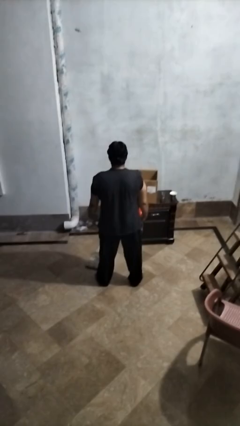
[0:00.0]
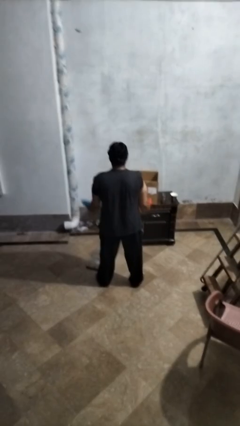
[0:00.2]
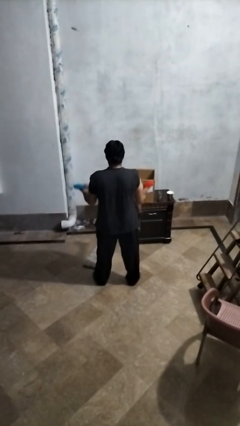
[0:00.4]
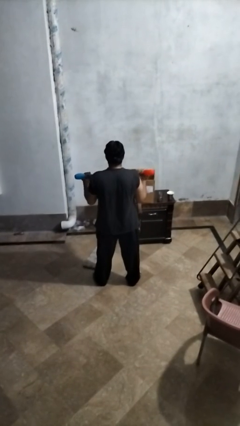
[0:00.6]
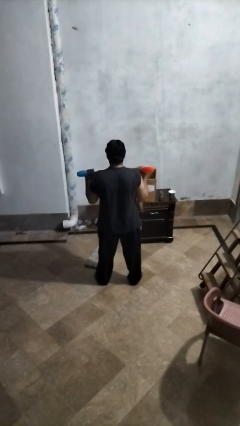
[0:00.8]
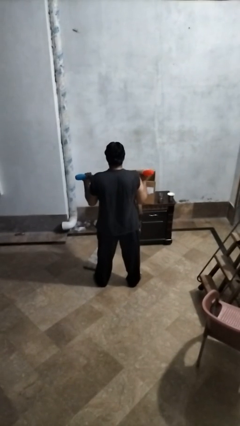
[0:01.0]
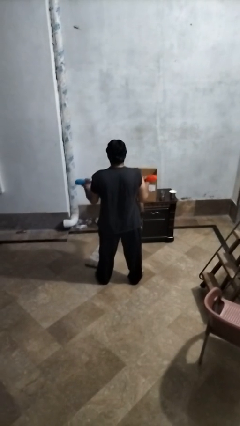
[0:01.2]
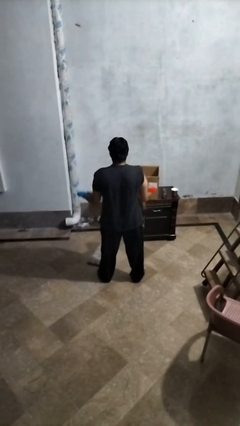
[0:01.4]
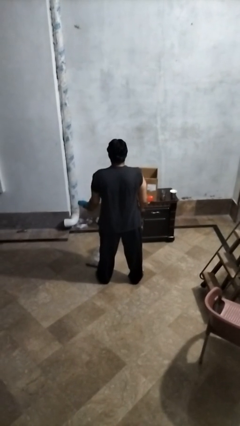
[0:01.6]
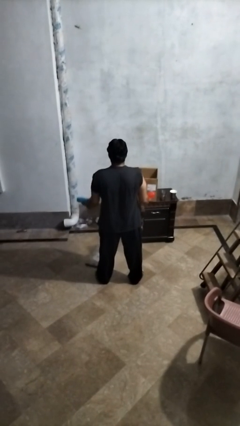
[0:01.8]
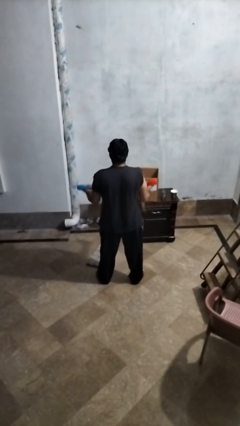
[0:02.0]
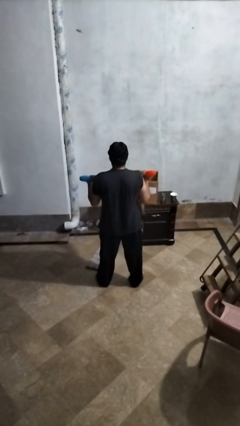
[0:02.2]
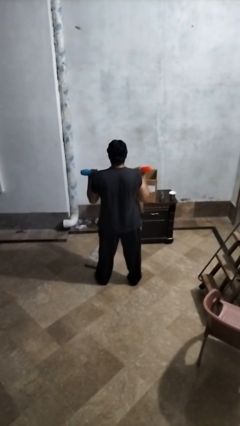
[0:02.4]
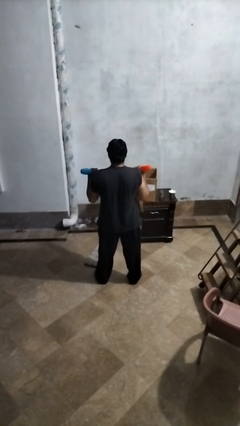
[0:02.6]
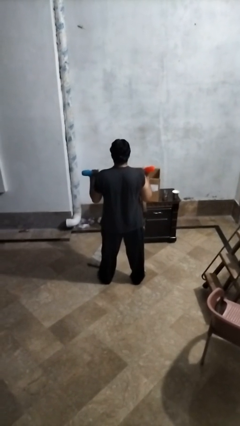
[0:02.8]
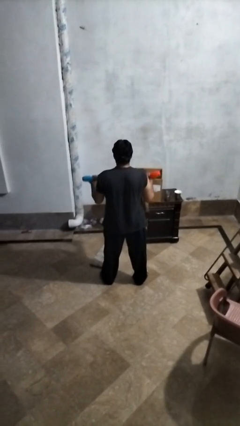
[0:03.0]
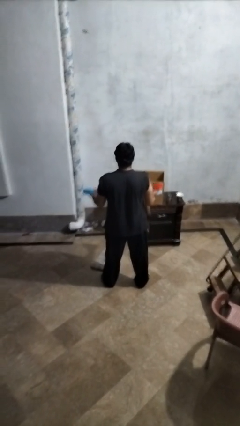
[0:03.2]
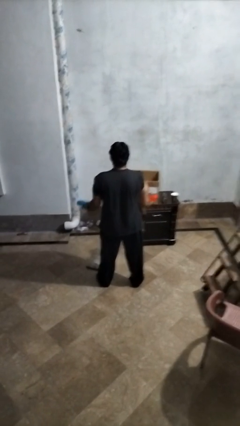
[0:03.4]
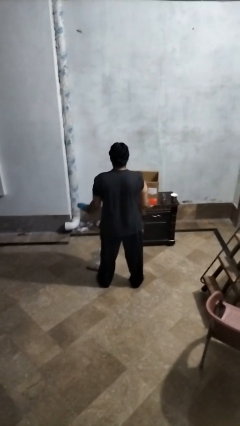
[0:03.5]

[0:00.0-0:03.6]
person lifts dumbbells

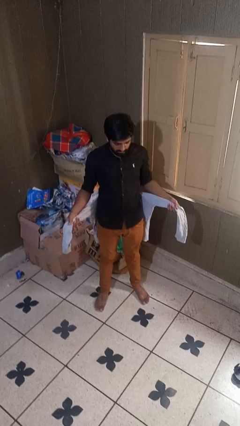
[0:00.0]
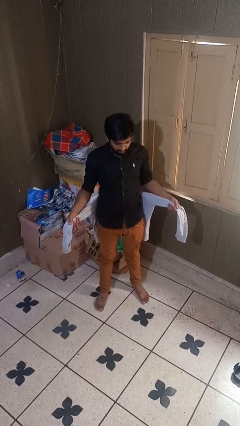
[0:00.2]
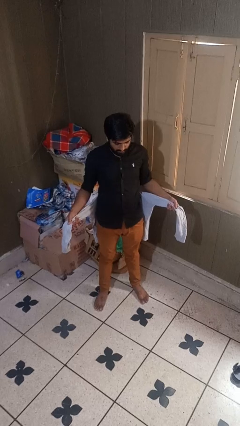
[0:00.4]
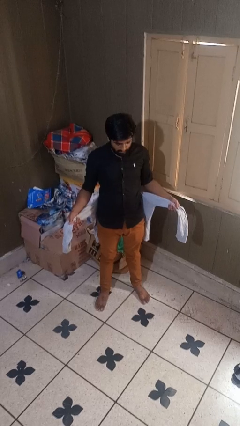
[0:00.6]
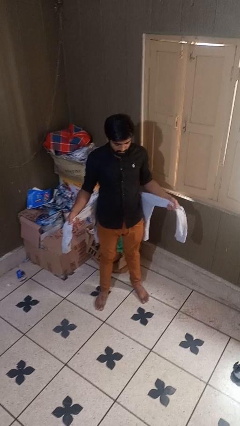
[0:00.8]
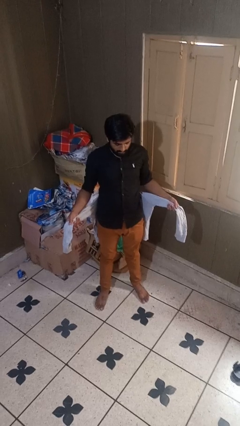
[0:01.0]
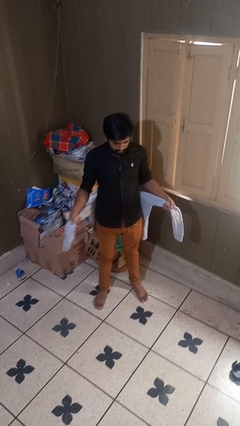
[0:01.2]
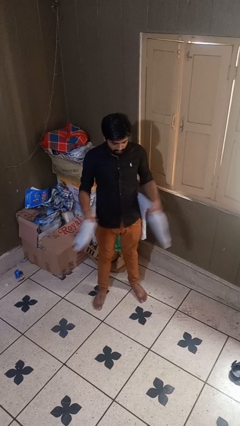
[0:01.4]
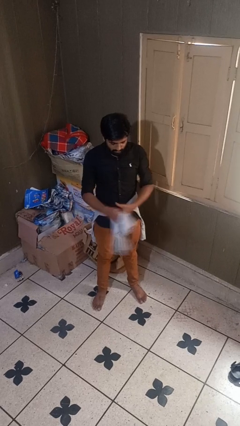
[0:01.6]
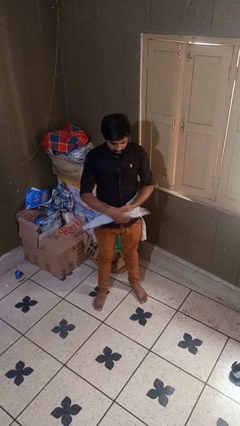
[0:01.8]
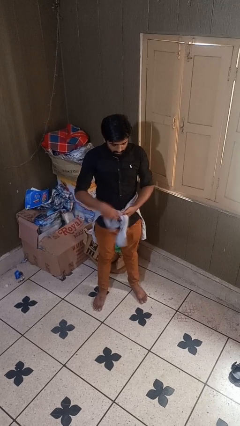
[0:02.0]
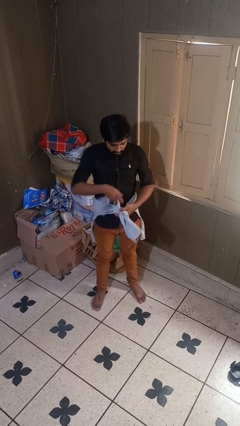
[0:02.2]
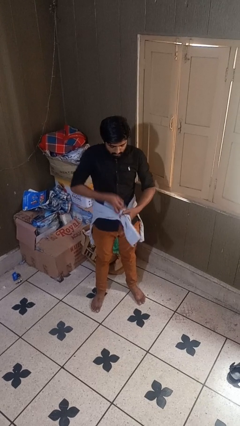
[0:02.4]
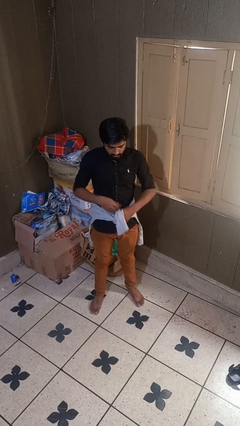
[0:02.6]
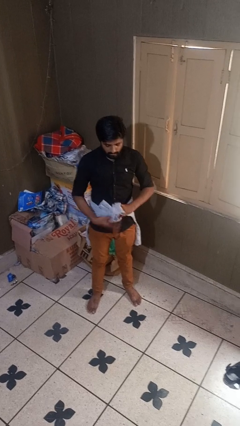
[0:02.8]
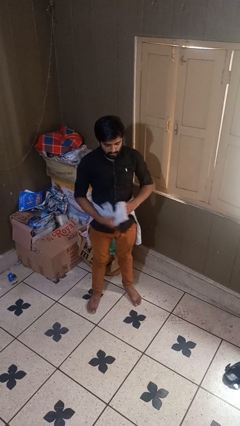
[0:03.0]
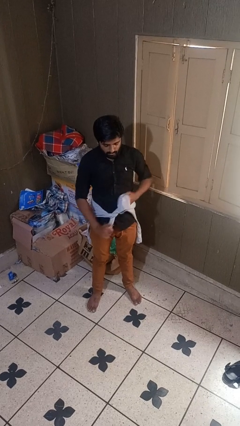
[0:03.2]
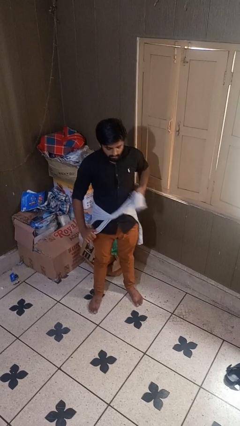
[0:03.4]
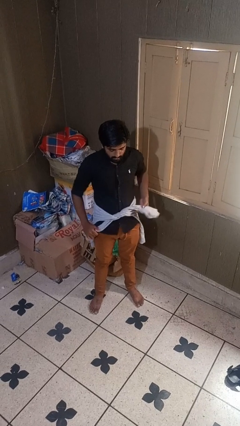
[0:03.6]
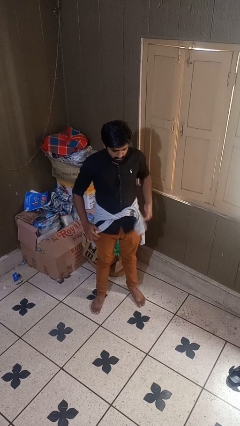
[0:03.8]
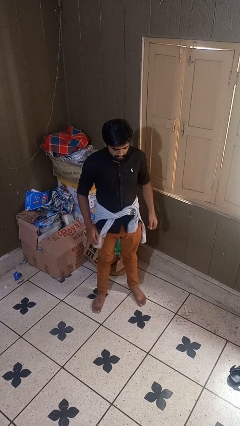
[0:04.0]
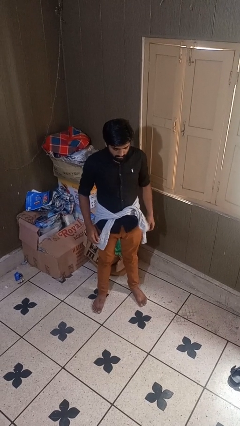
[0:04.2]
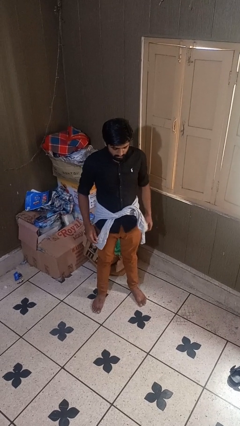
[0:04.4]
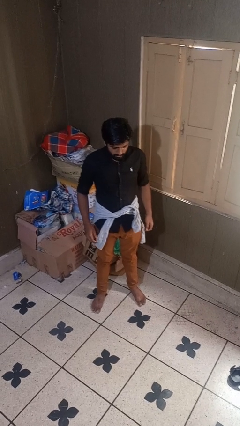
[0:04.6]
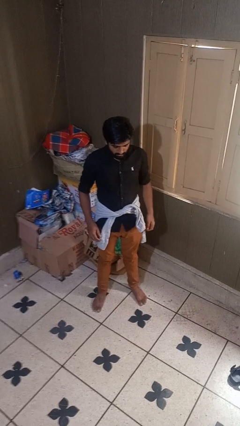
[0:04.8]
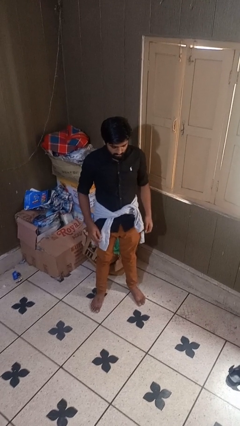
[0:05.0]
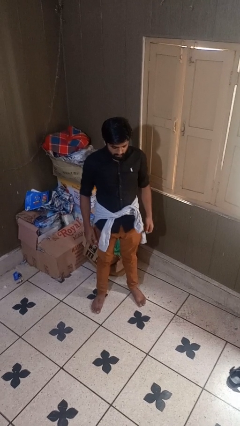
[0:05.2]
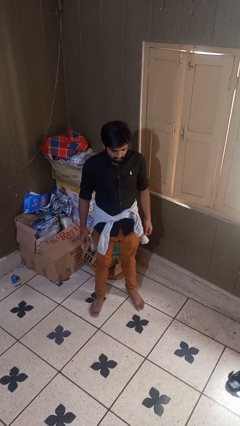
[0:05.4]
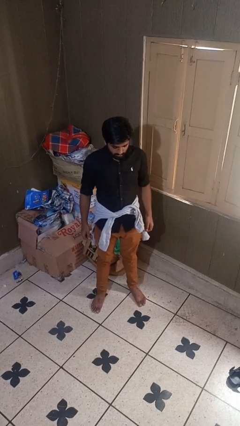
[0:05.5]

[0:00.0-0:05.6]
person ties jacket around waist

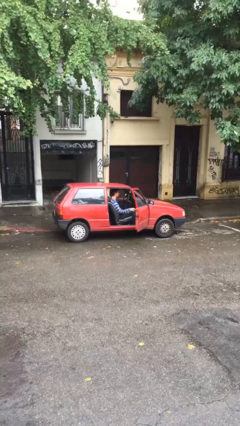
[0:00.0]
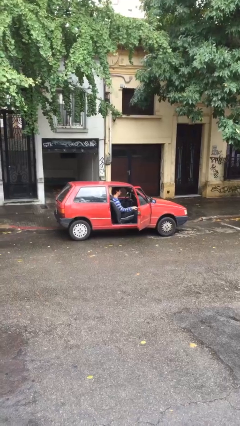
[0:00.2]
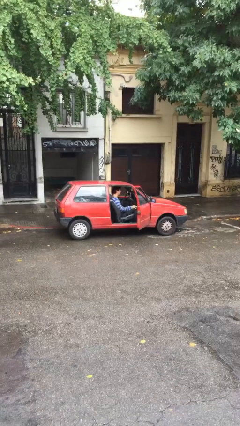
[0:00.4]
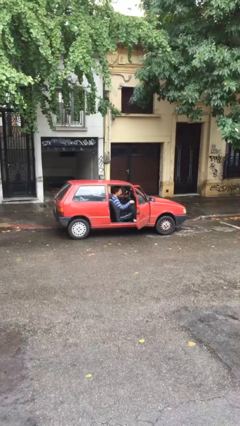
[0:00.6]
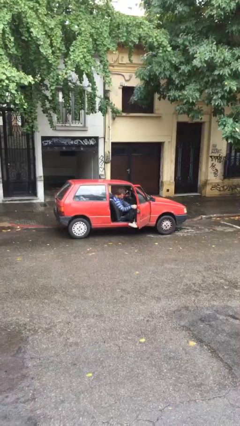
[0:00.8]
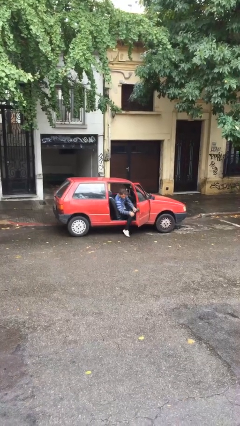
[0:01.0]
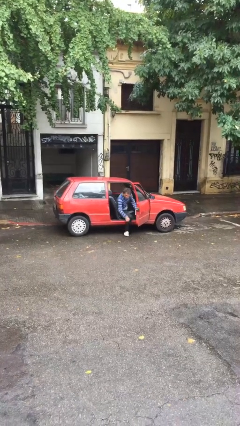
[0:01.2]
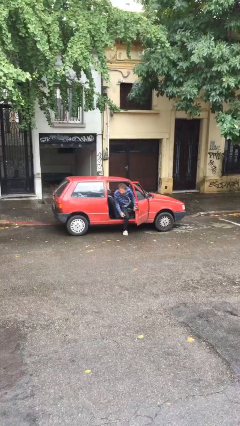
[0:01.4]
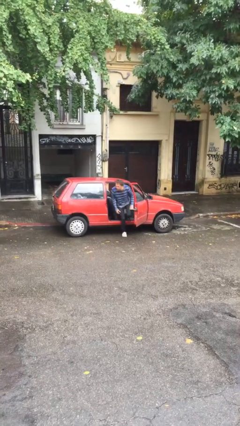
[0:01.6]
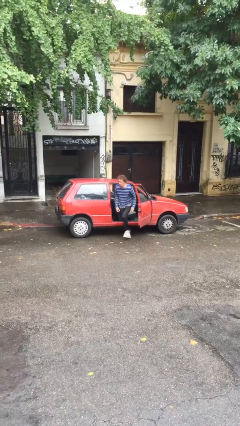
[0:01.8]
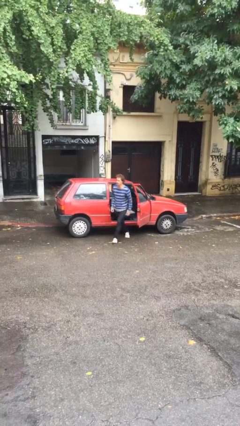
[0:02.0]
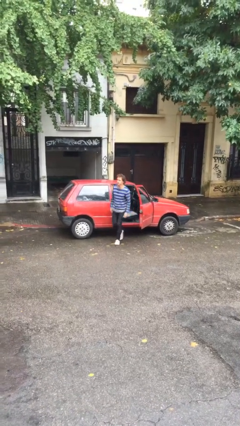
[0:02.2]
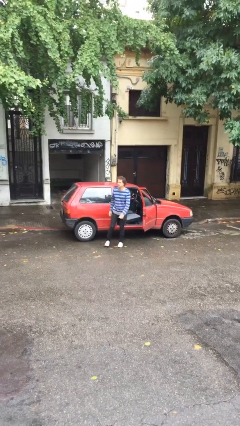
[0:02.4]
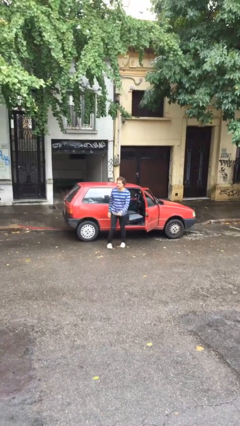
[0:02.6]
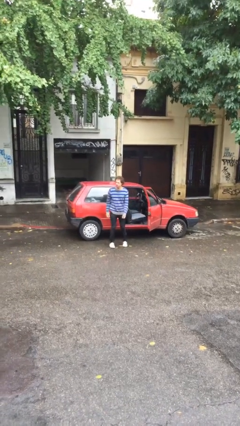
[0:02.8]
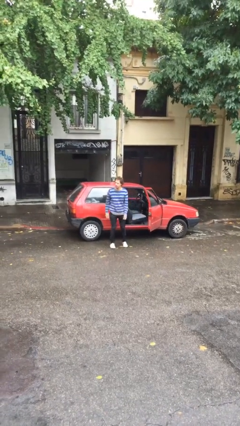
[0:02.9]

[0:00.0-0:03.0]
person exits car

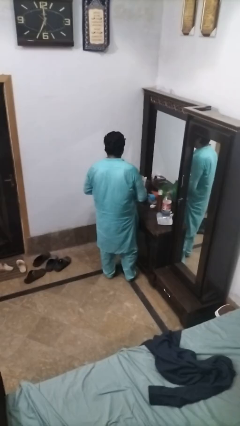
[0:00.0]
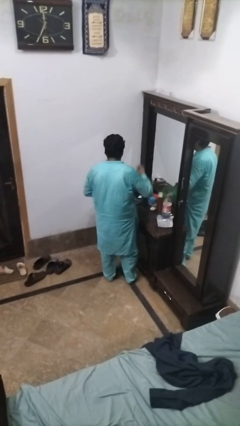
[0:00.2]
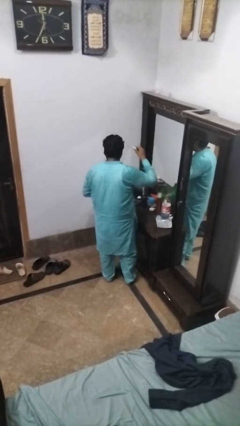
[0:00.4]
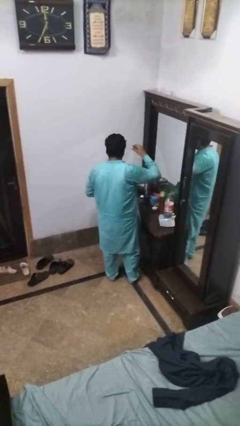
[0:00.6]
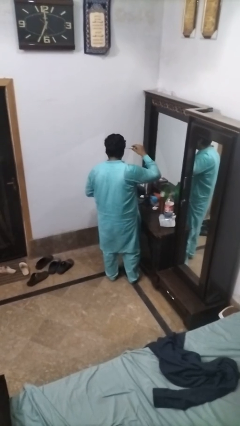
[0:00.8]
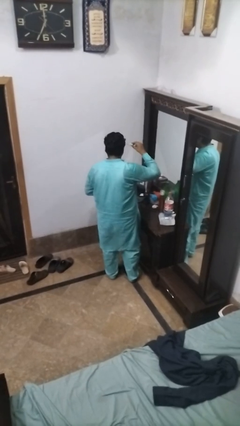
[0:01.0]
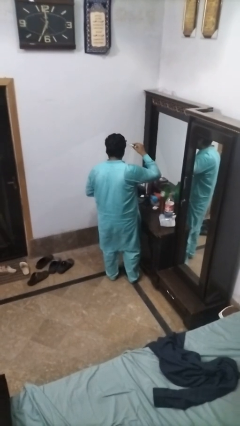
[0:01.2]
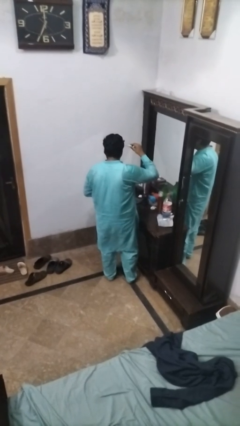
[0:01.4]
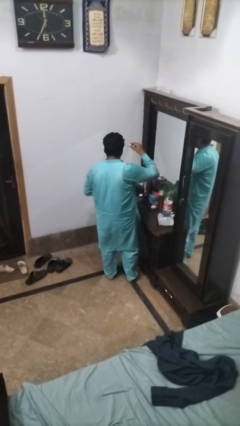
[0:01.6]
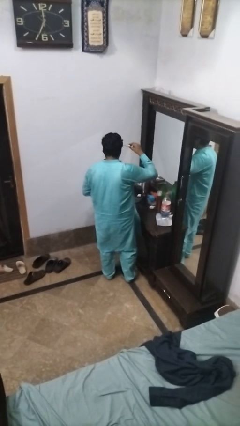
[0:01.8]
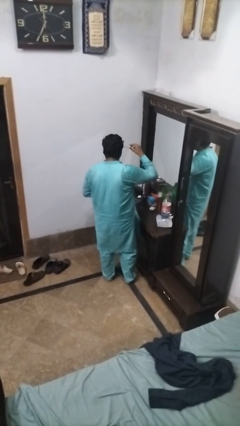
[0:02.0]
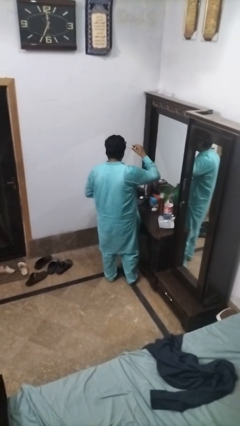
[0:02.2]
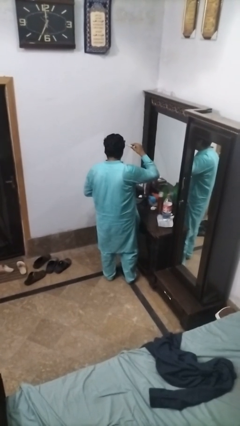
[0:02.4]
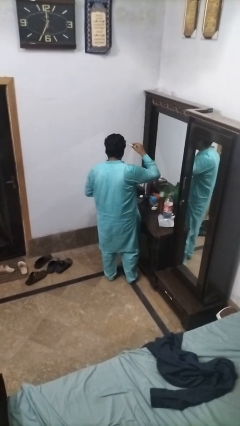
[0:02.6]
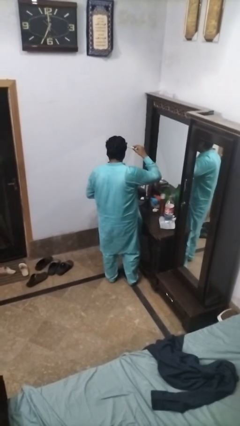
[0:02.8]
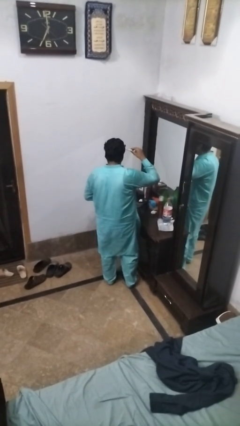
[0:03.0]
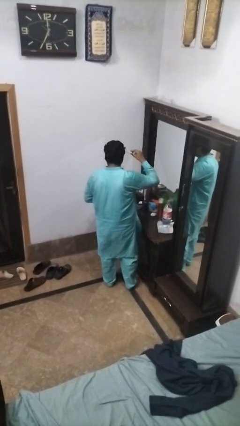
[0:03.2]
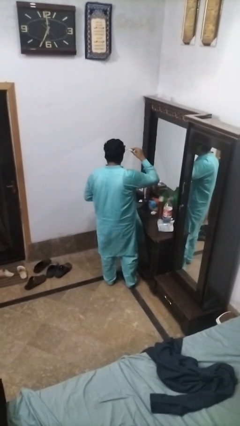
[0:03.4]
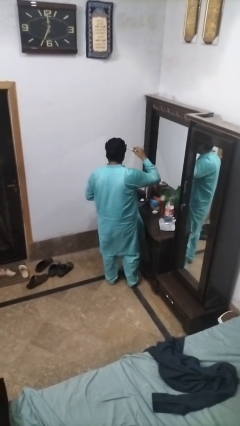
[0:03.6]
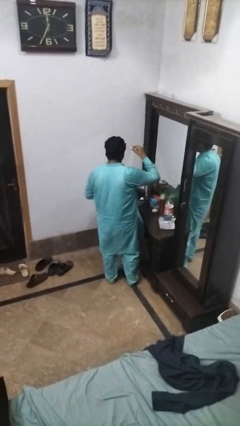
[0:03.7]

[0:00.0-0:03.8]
person applies eye makeup

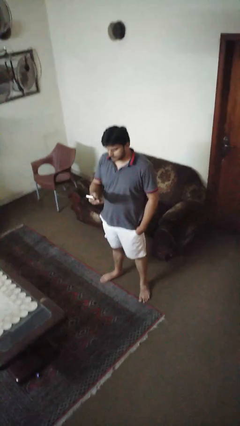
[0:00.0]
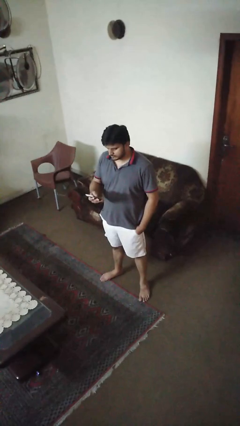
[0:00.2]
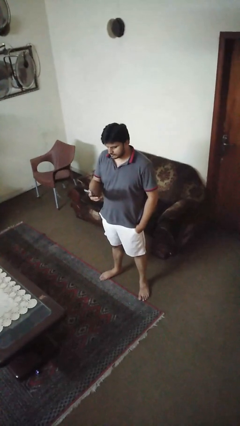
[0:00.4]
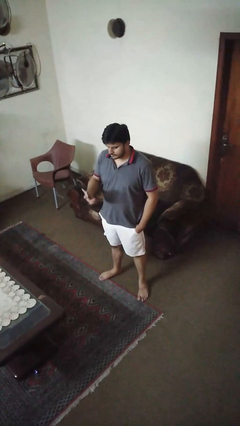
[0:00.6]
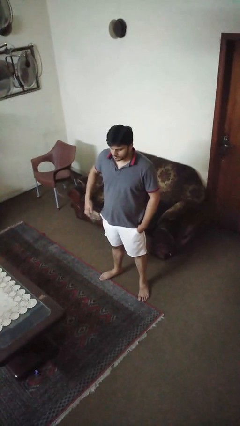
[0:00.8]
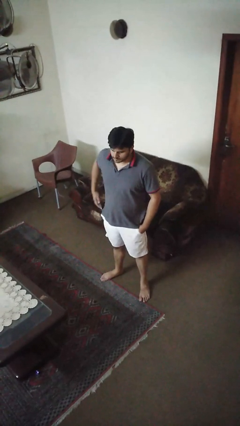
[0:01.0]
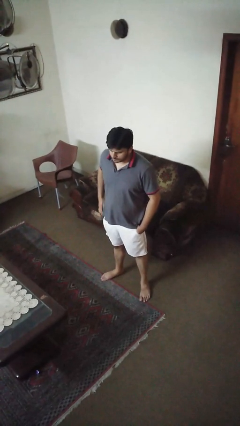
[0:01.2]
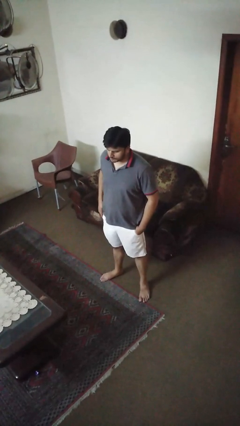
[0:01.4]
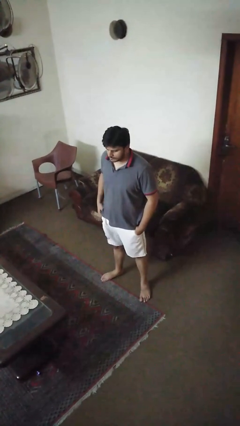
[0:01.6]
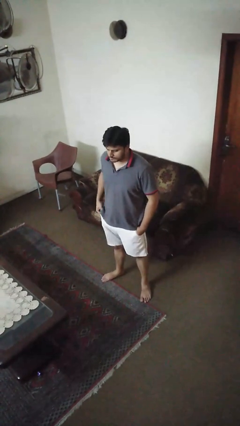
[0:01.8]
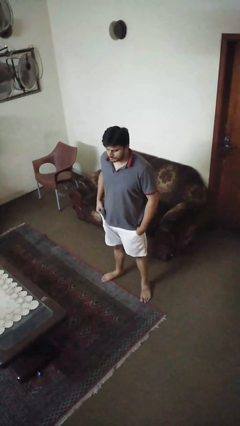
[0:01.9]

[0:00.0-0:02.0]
person puts phone into pocket
